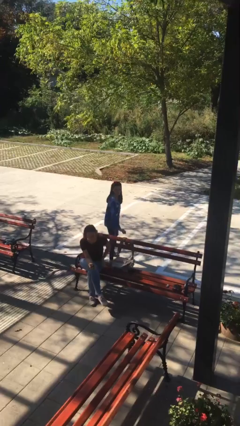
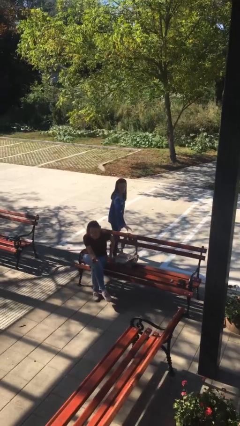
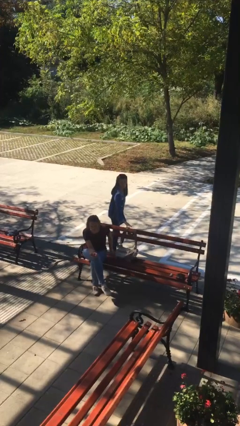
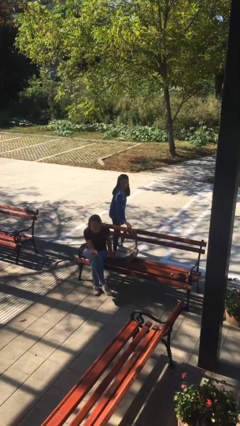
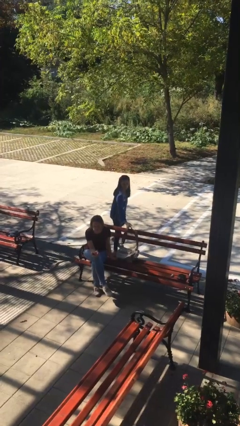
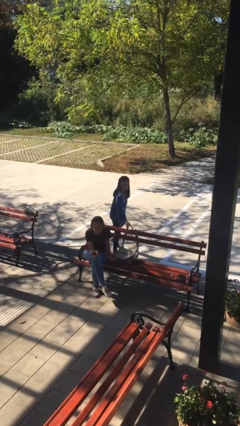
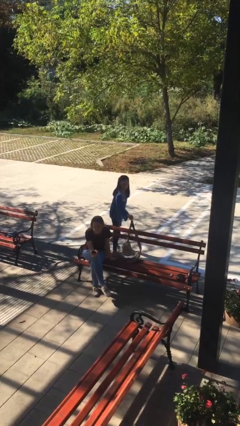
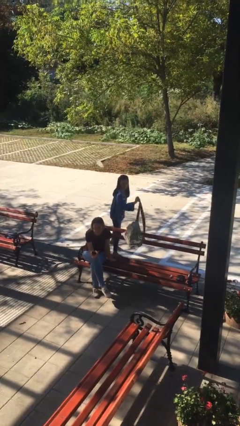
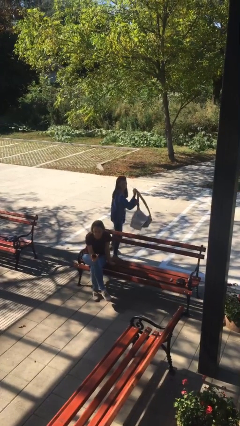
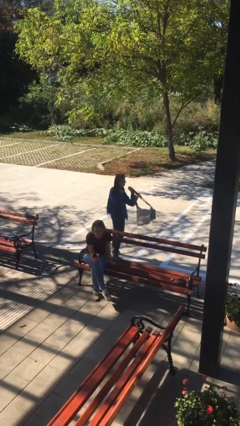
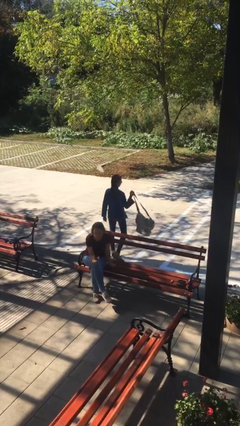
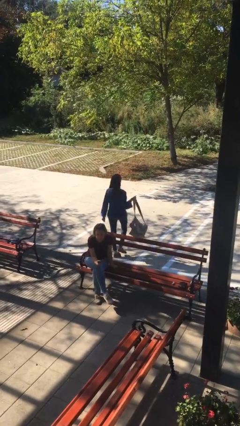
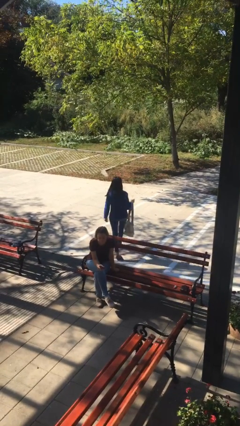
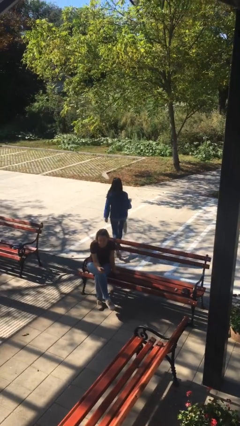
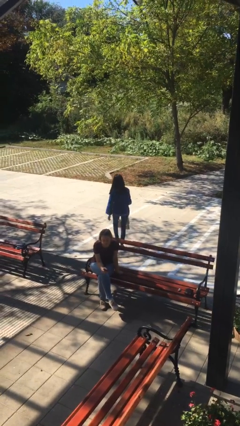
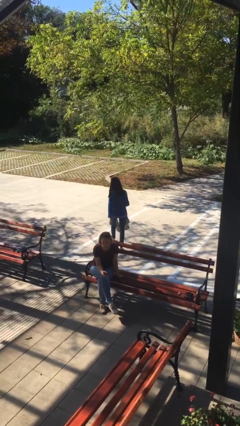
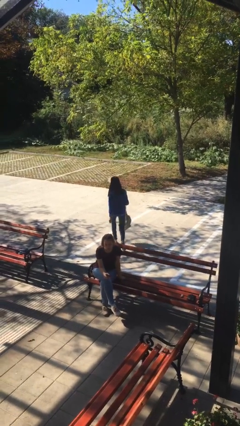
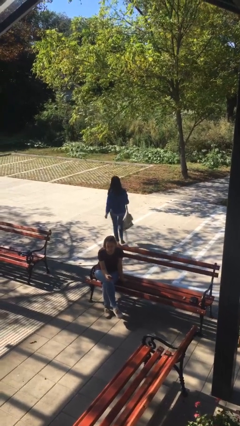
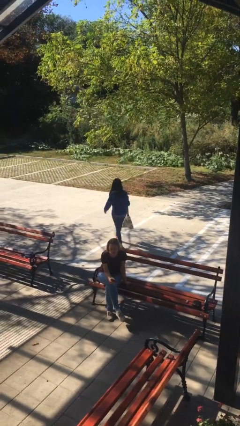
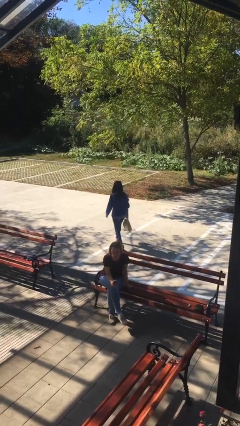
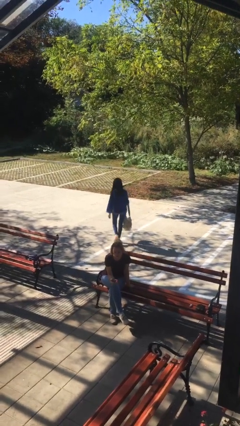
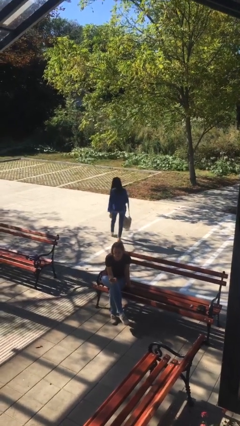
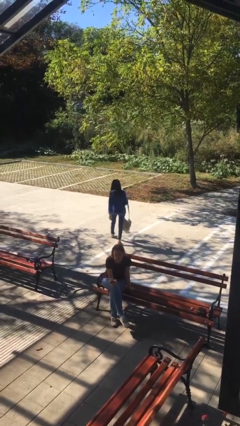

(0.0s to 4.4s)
person steals object from person

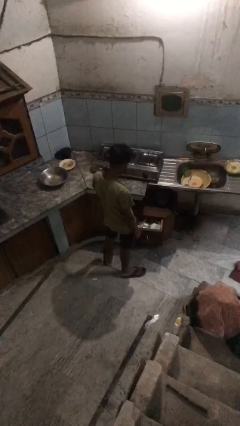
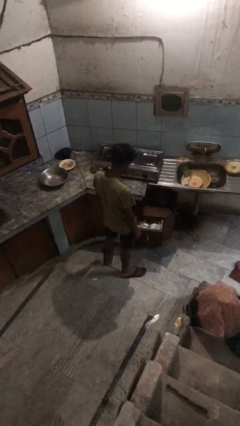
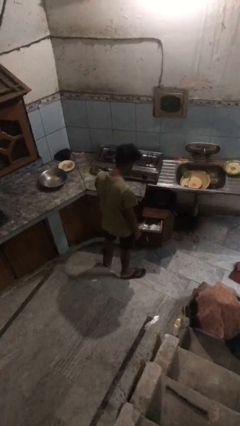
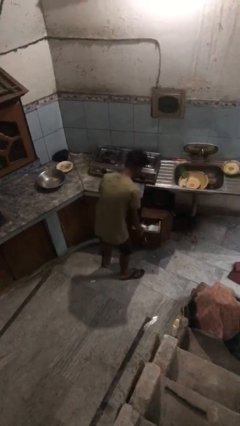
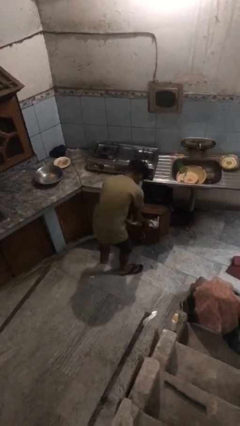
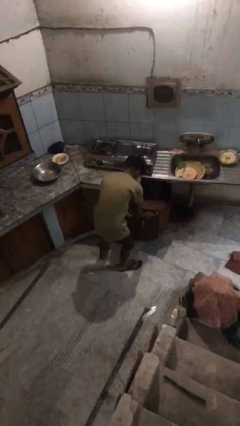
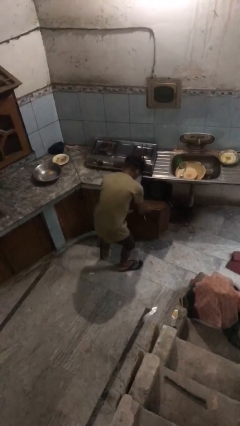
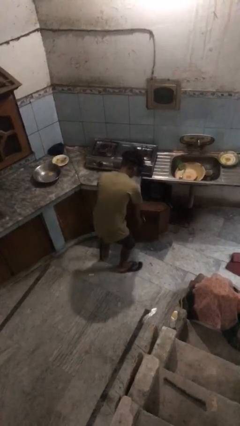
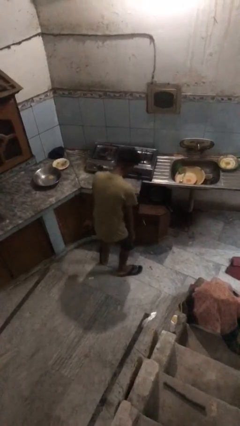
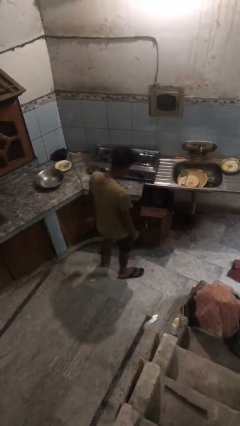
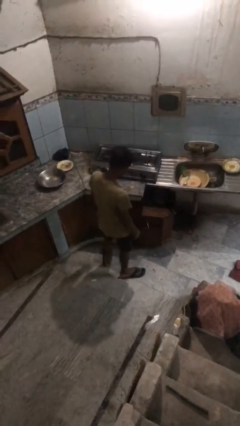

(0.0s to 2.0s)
person closes kitchen drawer

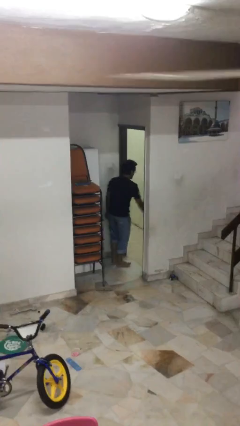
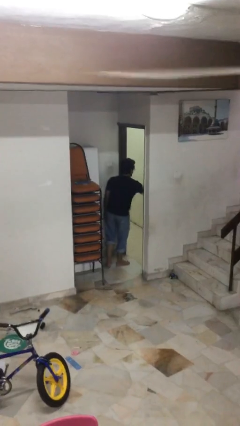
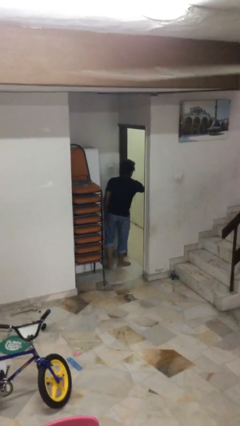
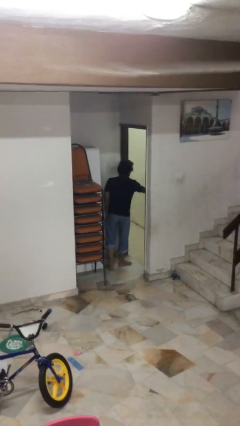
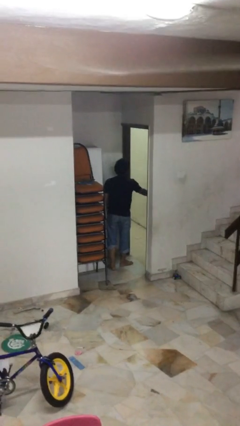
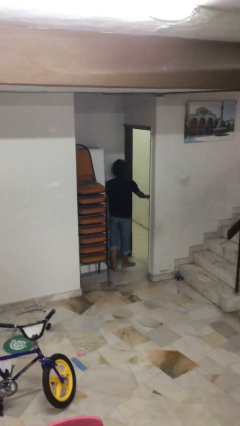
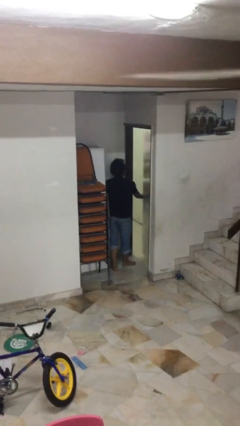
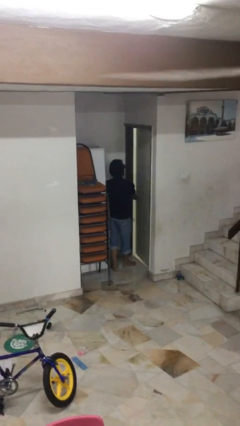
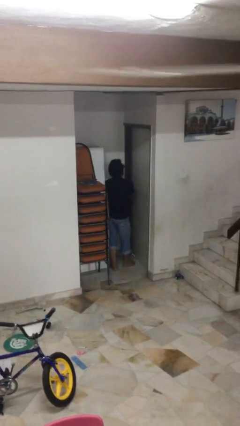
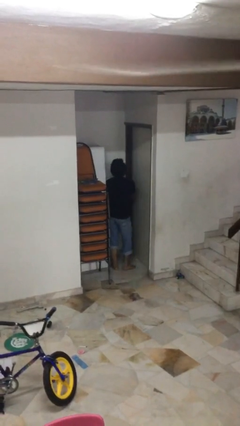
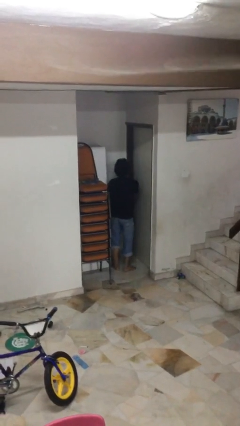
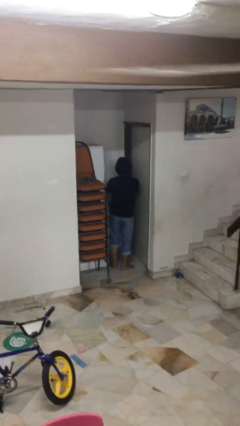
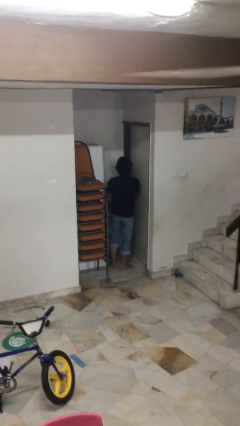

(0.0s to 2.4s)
person closes facility door

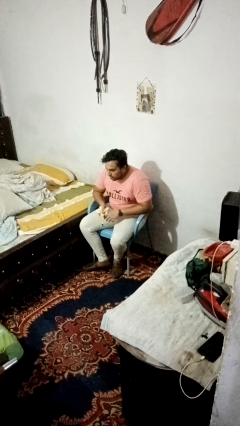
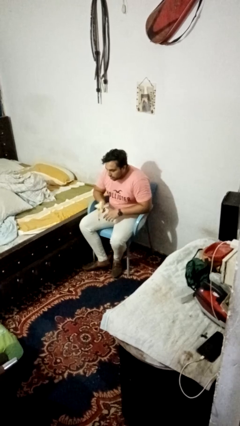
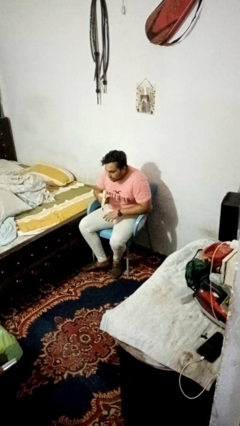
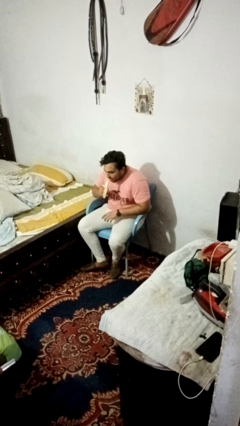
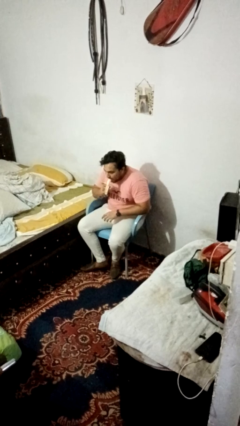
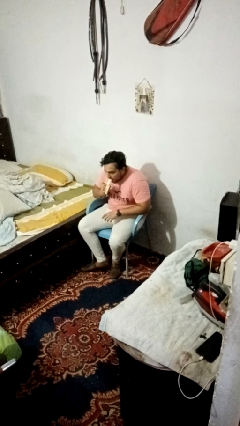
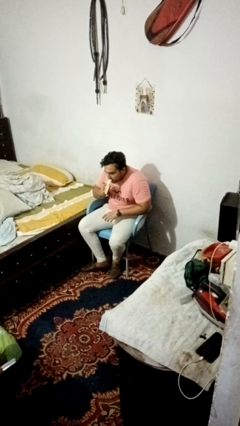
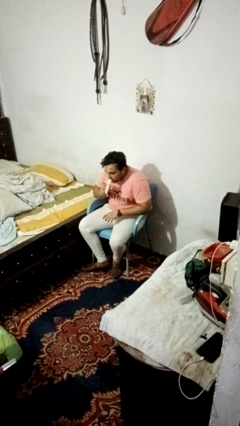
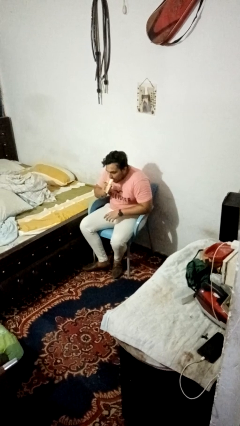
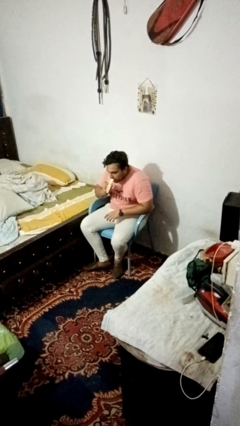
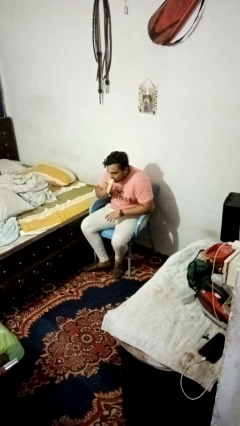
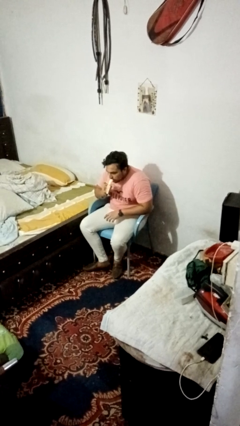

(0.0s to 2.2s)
person eats banana

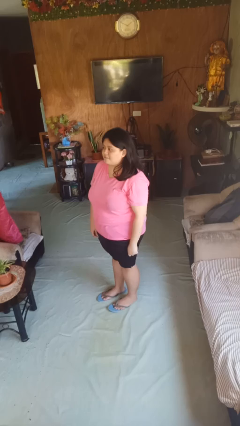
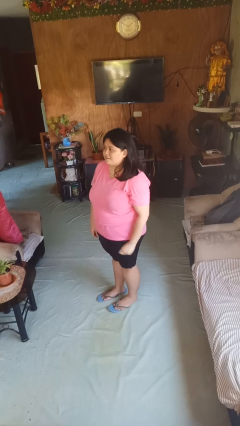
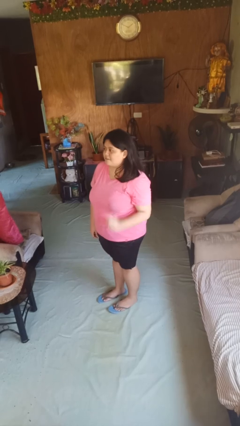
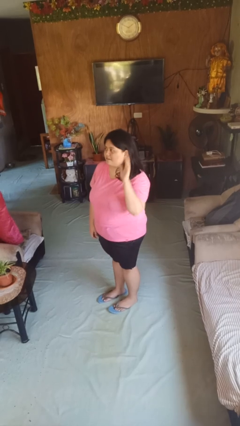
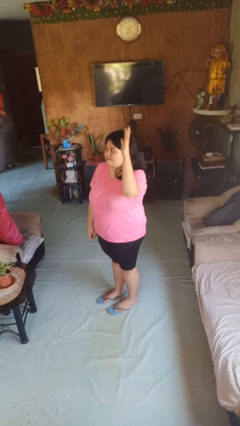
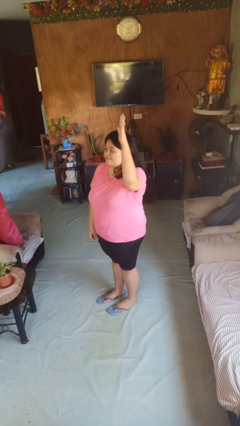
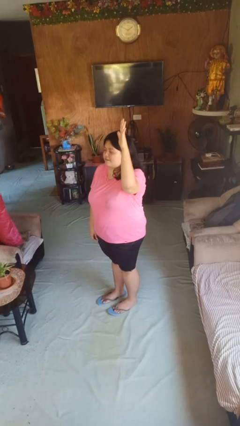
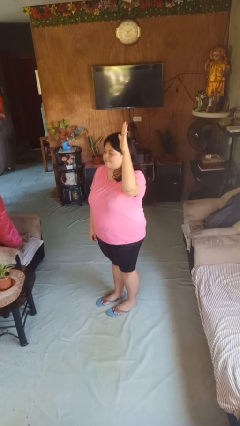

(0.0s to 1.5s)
person gestures raise hand

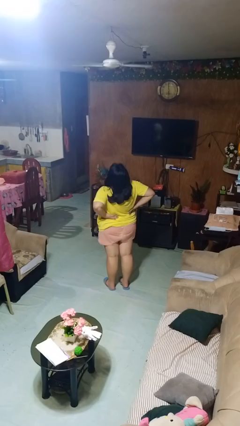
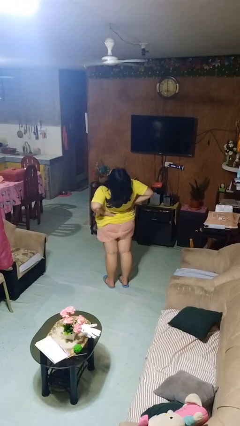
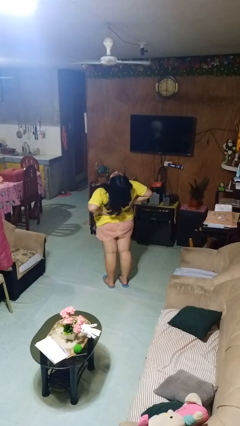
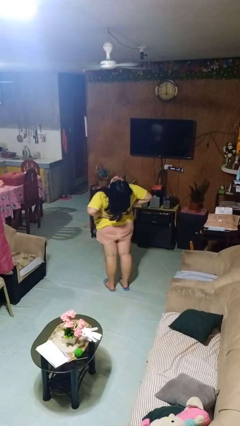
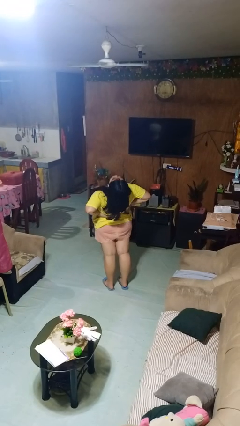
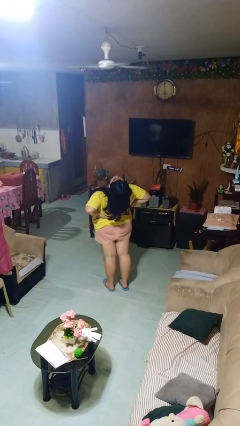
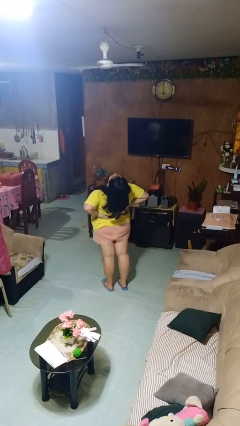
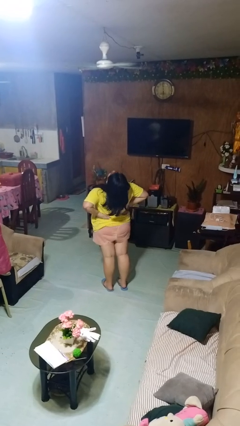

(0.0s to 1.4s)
person stretches back

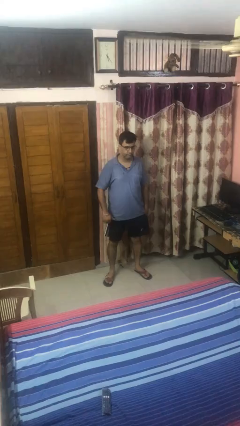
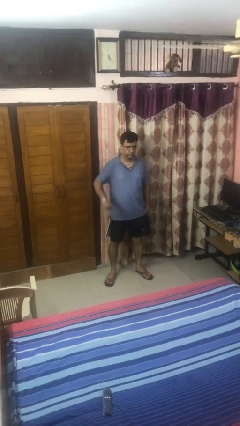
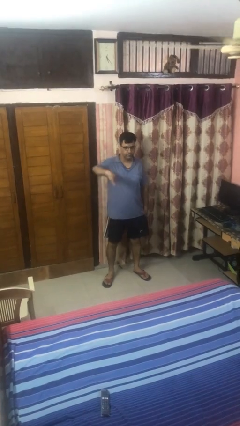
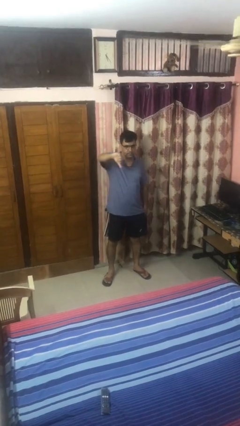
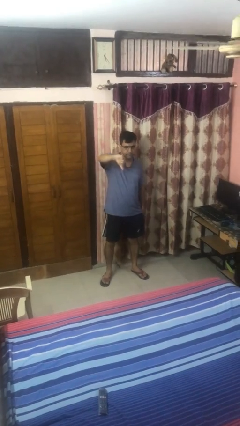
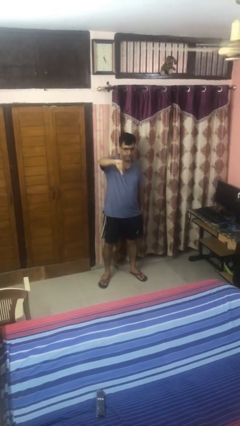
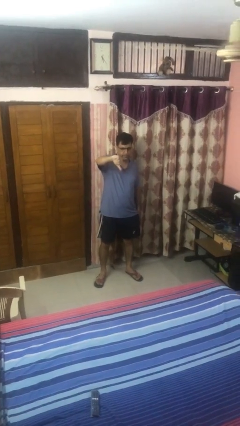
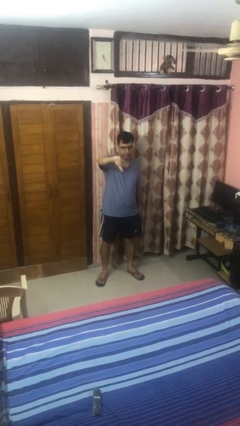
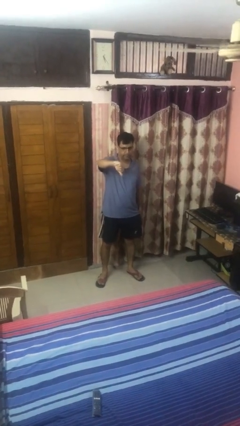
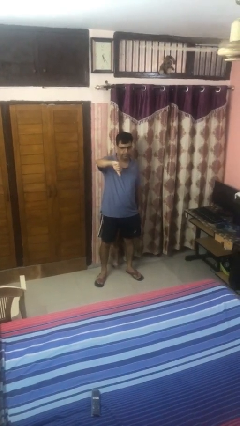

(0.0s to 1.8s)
person gestures thumbs down

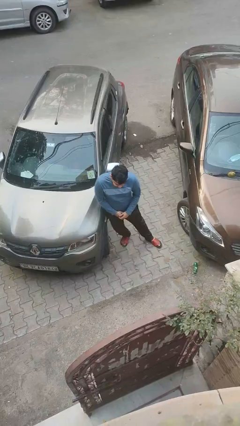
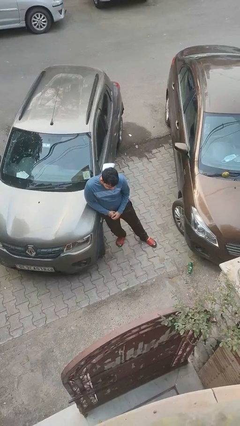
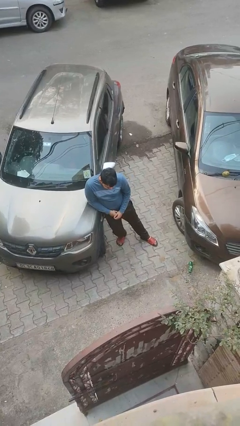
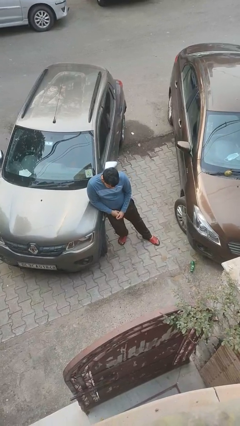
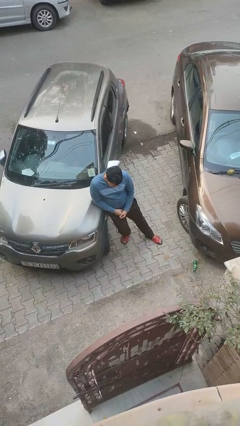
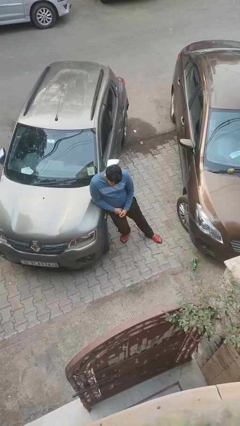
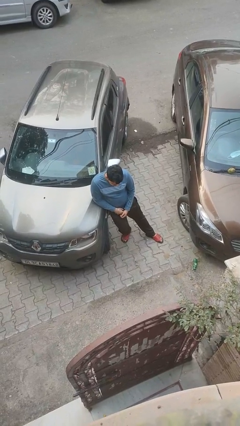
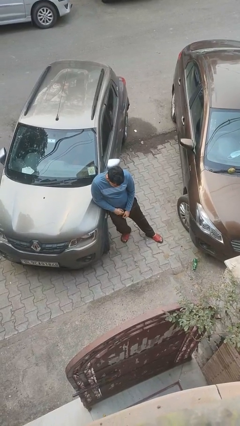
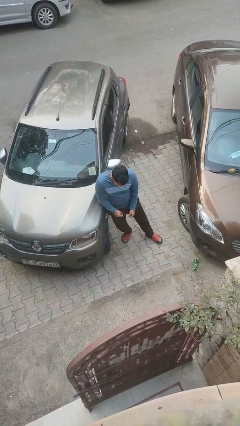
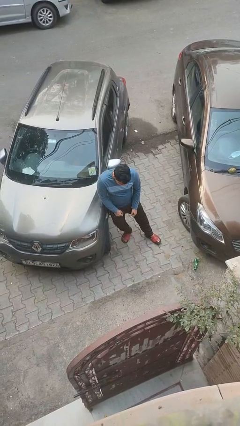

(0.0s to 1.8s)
person leans against car
